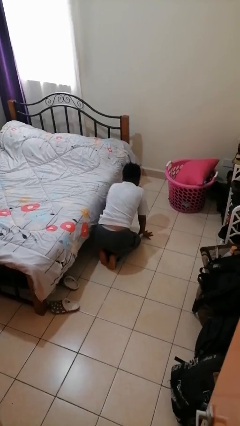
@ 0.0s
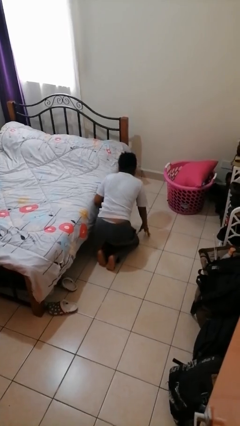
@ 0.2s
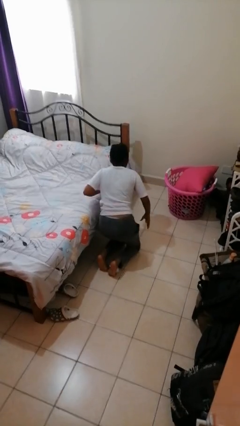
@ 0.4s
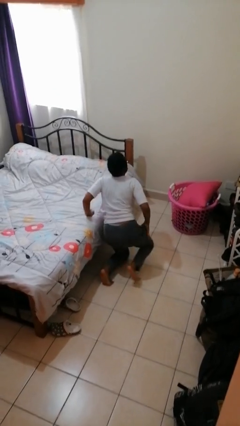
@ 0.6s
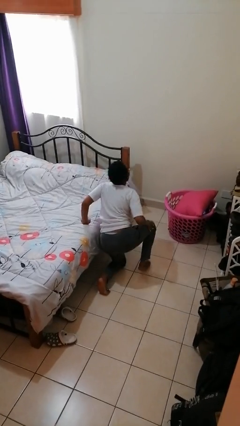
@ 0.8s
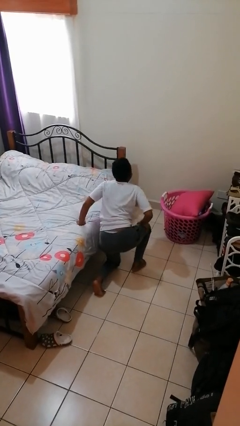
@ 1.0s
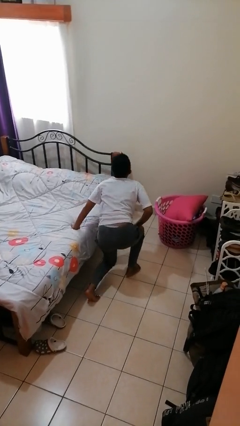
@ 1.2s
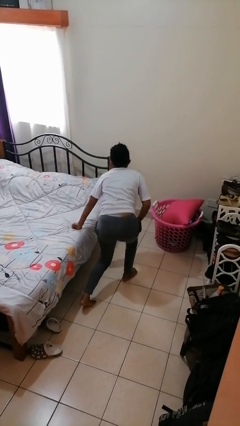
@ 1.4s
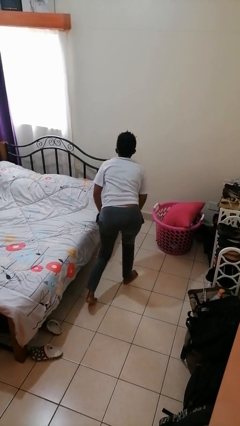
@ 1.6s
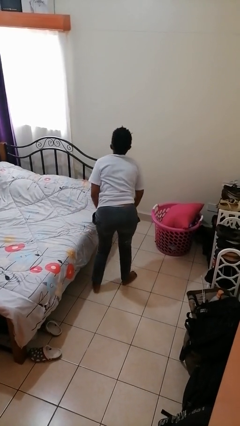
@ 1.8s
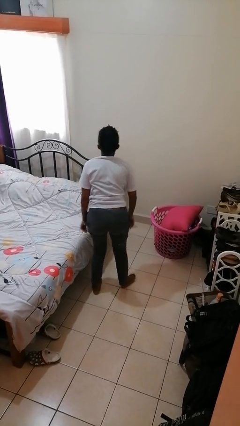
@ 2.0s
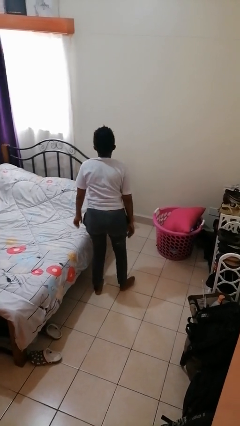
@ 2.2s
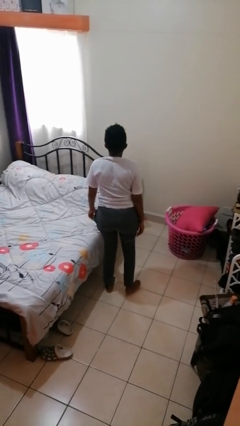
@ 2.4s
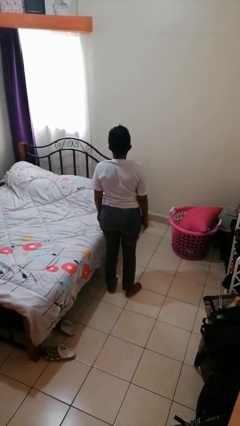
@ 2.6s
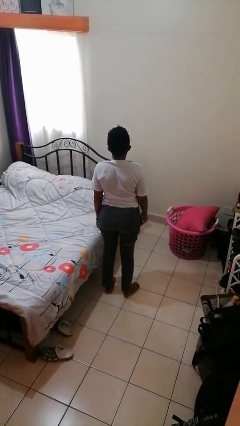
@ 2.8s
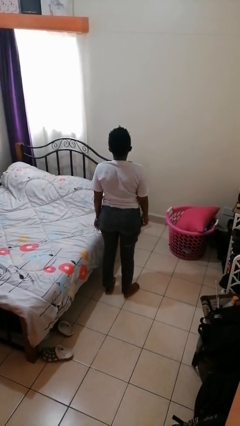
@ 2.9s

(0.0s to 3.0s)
person stands up from floor

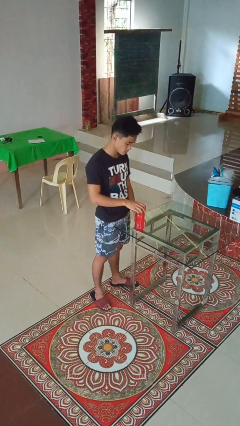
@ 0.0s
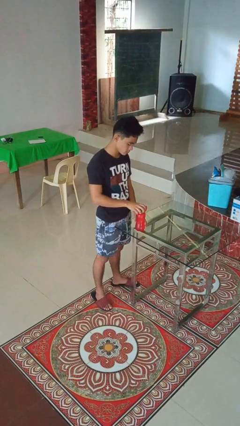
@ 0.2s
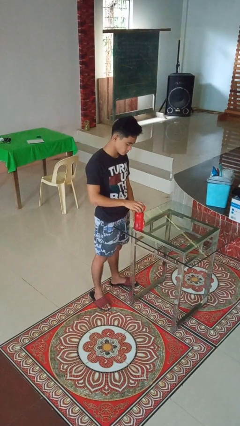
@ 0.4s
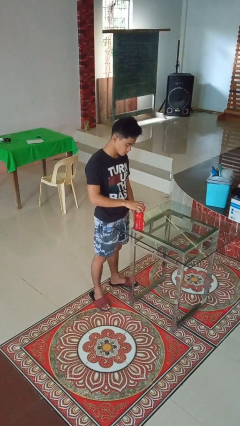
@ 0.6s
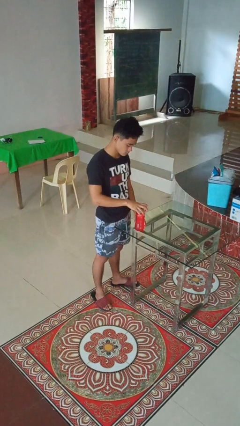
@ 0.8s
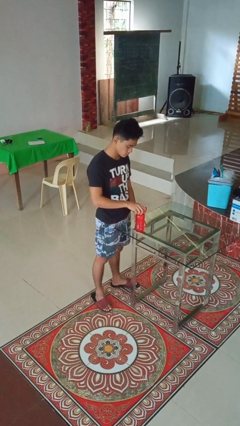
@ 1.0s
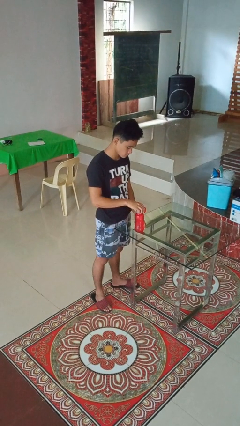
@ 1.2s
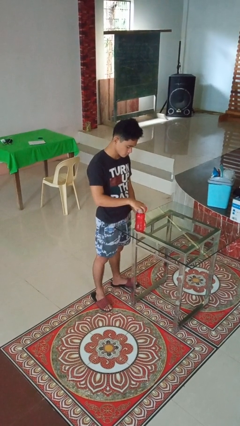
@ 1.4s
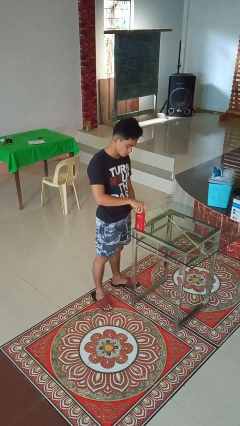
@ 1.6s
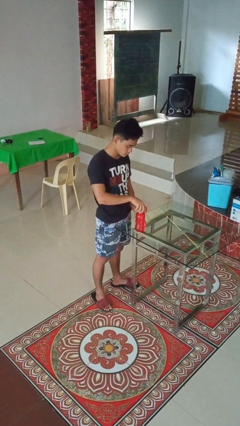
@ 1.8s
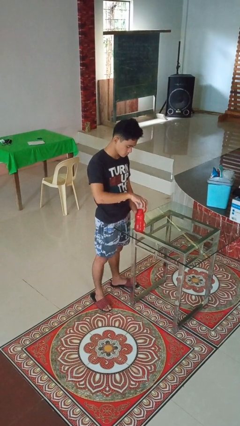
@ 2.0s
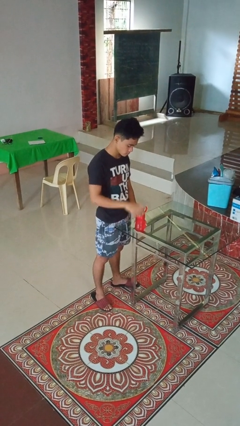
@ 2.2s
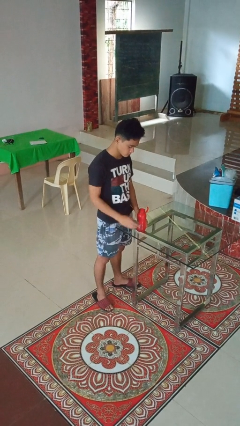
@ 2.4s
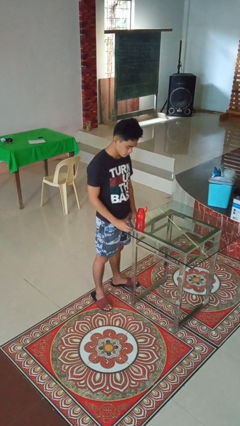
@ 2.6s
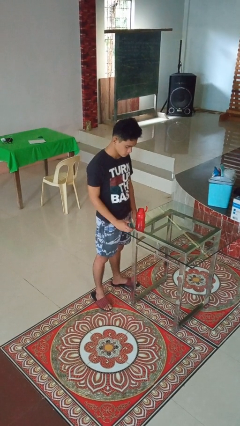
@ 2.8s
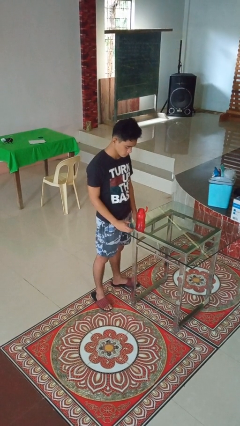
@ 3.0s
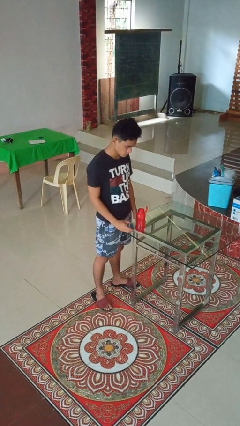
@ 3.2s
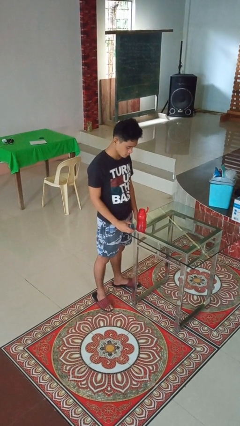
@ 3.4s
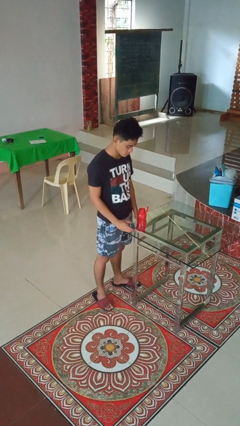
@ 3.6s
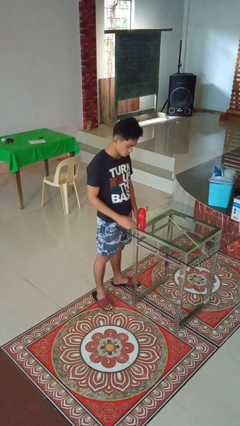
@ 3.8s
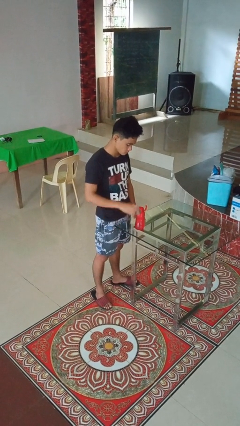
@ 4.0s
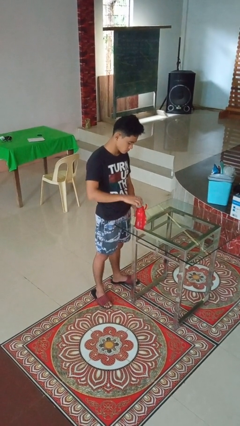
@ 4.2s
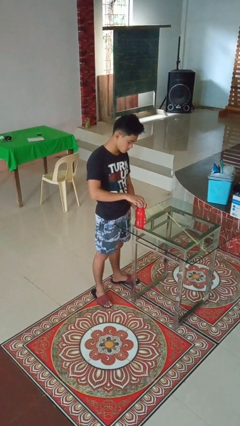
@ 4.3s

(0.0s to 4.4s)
person unscrews lid from bottle

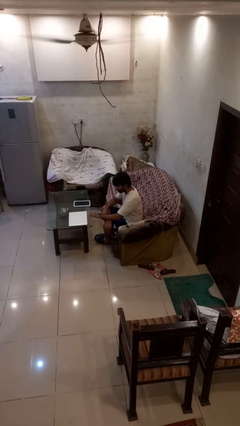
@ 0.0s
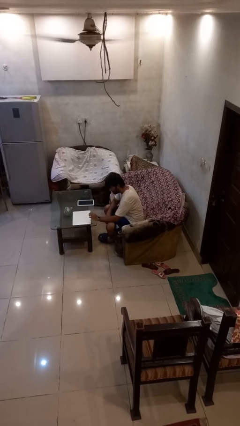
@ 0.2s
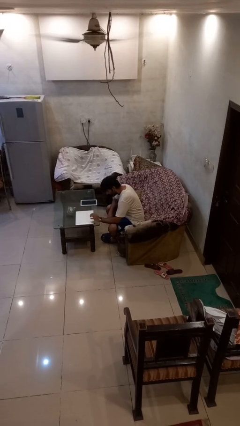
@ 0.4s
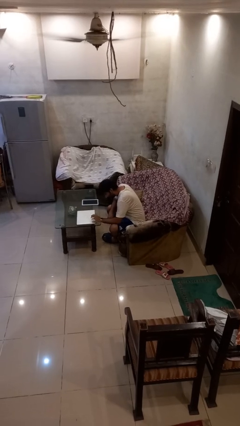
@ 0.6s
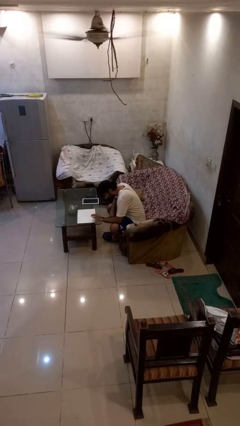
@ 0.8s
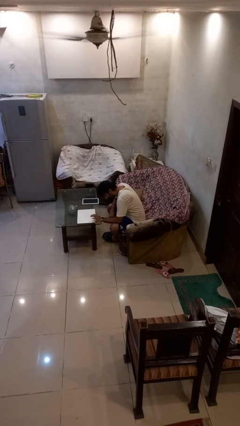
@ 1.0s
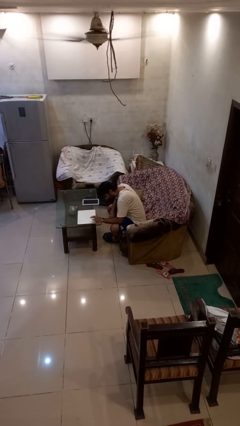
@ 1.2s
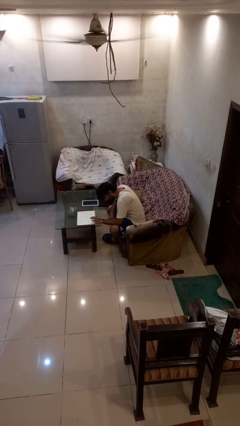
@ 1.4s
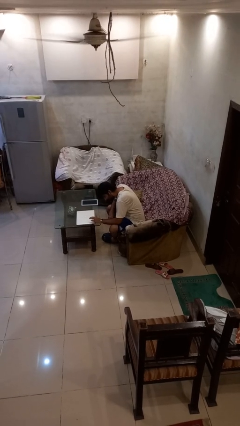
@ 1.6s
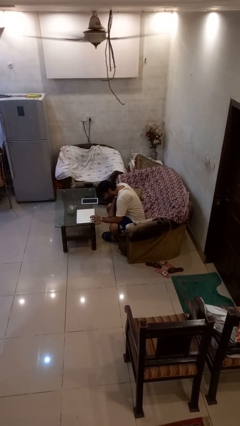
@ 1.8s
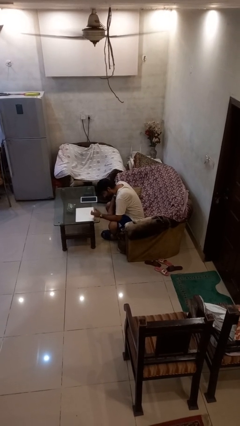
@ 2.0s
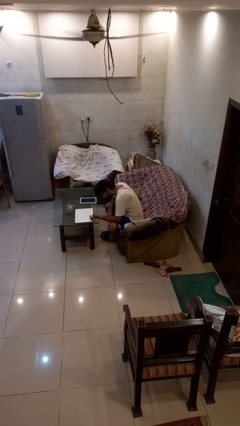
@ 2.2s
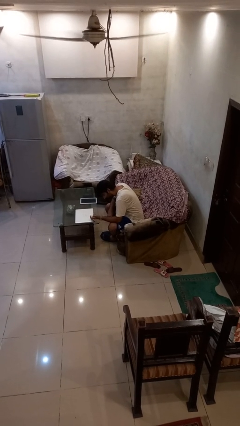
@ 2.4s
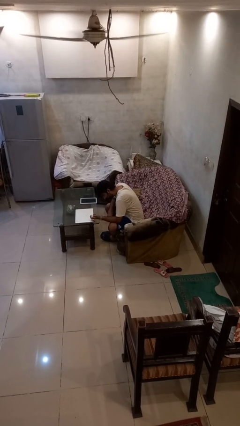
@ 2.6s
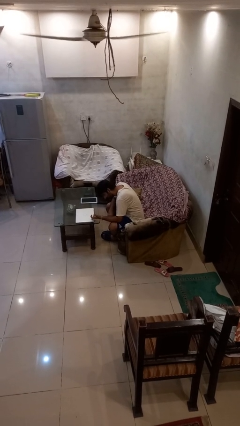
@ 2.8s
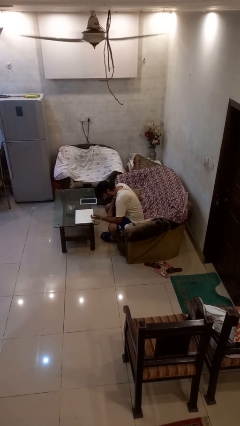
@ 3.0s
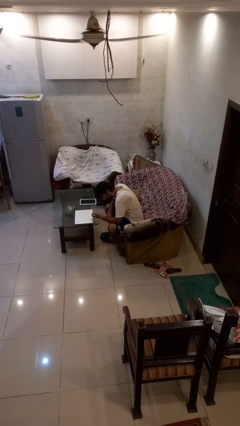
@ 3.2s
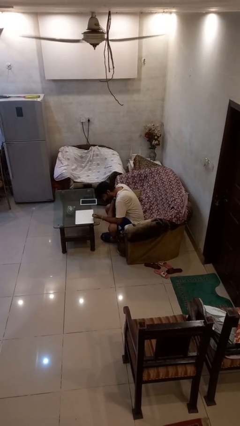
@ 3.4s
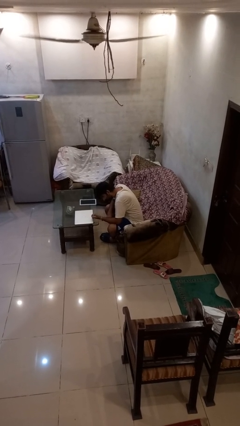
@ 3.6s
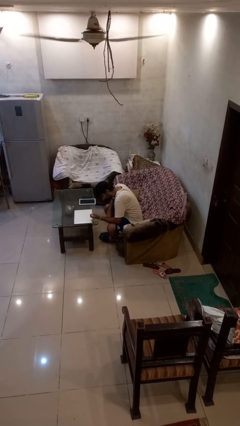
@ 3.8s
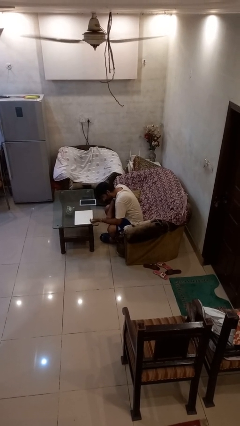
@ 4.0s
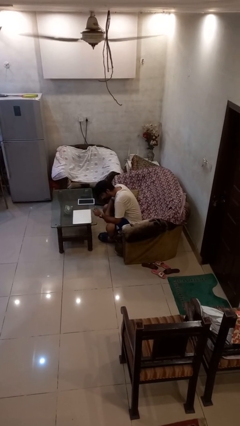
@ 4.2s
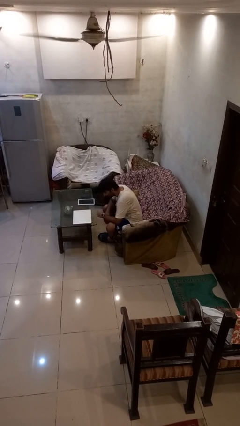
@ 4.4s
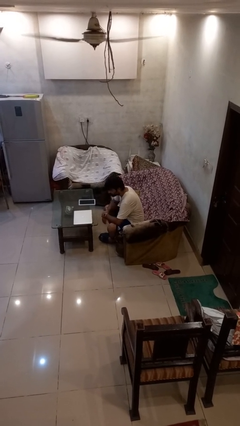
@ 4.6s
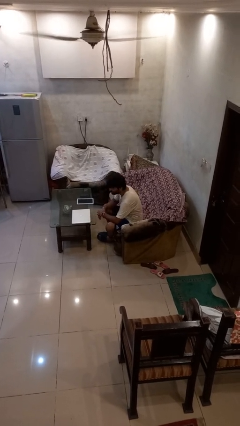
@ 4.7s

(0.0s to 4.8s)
person taps object with finger

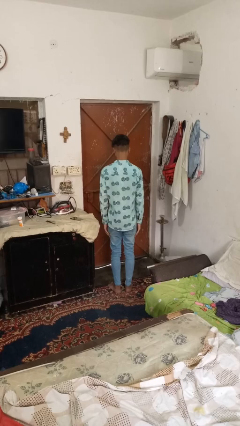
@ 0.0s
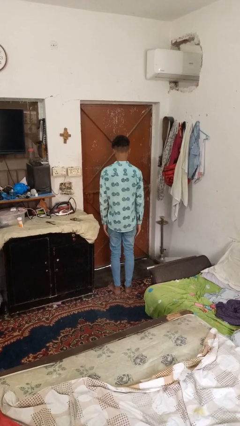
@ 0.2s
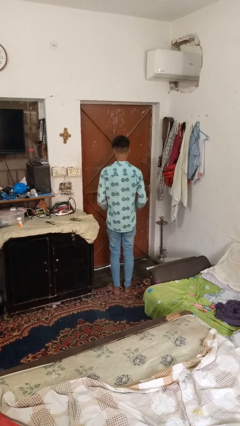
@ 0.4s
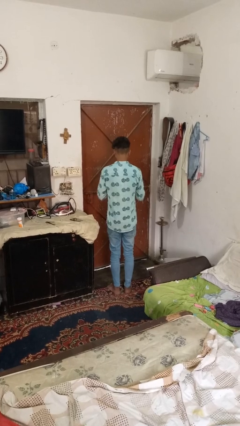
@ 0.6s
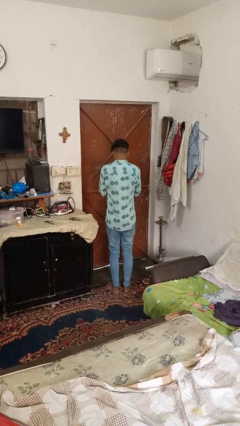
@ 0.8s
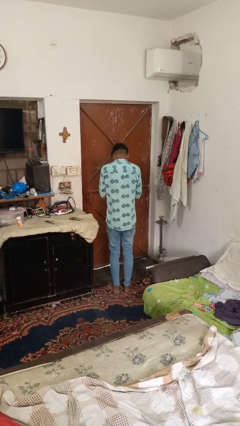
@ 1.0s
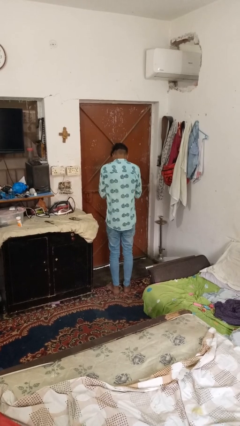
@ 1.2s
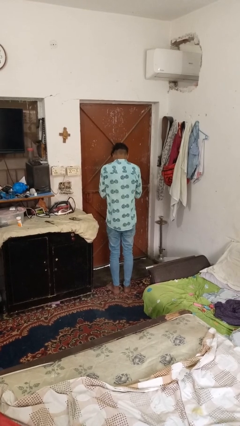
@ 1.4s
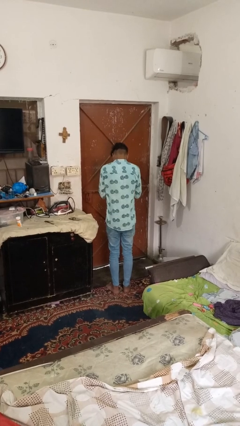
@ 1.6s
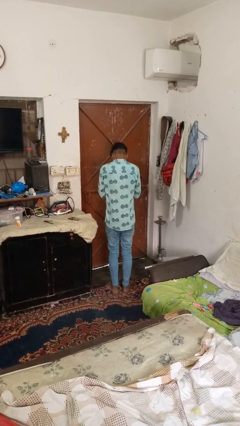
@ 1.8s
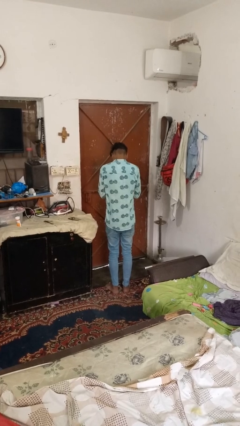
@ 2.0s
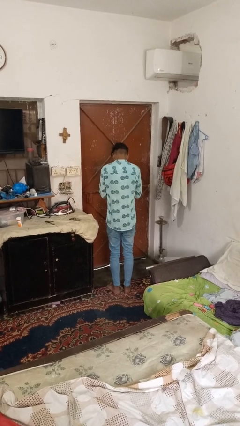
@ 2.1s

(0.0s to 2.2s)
person sneezes into hand

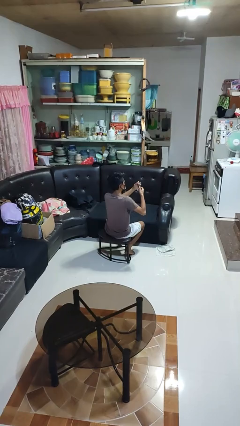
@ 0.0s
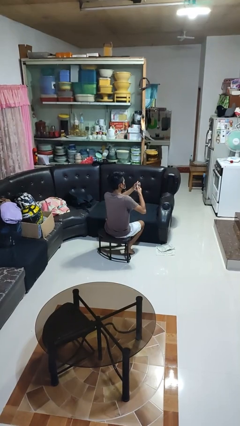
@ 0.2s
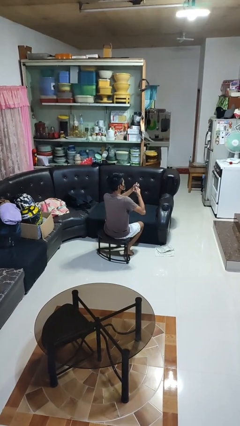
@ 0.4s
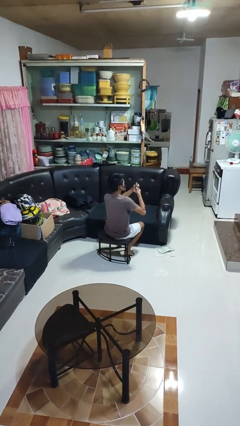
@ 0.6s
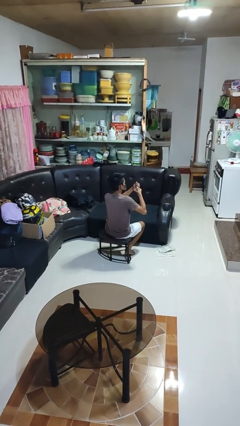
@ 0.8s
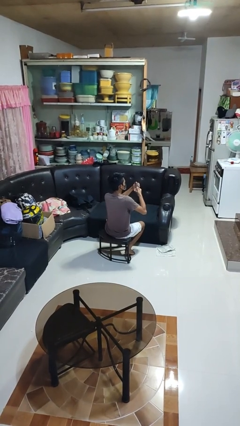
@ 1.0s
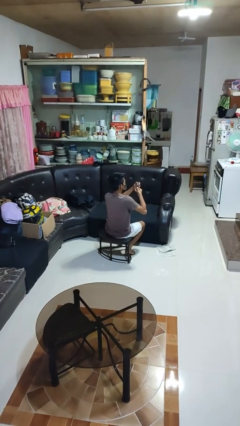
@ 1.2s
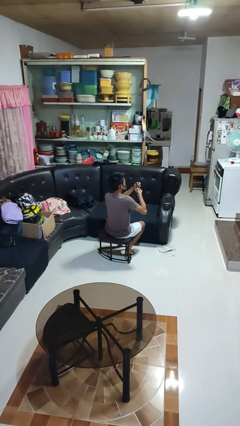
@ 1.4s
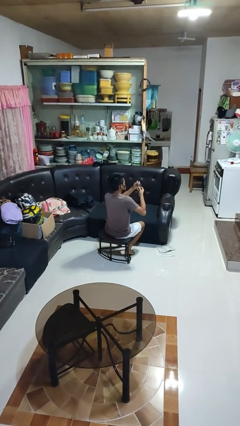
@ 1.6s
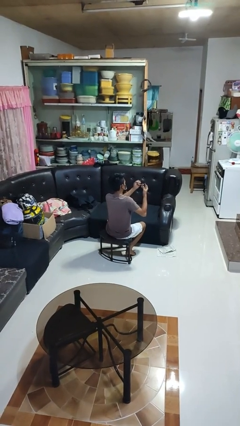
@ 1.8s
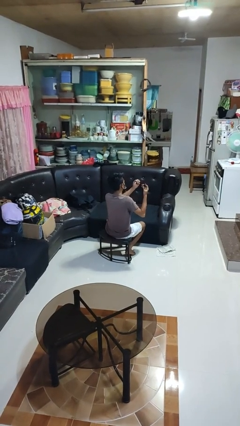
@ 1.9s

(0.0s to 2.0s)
person clips fingernails

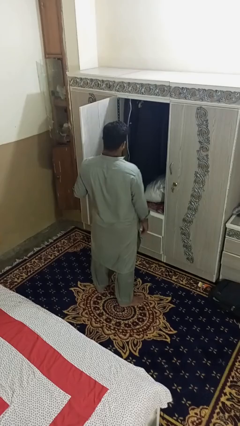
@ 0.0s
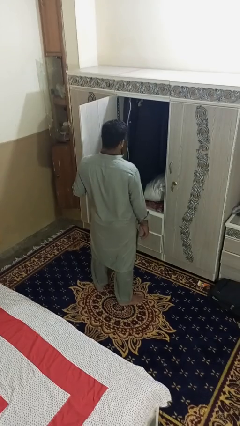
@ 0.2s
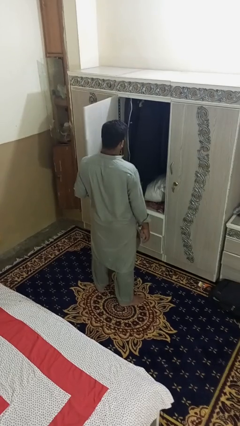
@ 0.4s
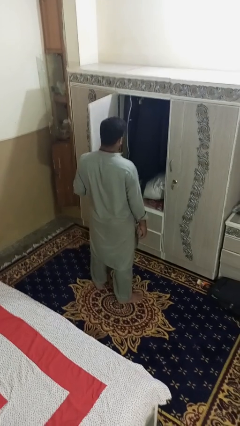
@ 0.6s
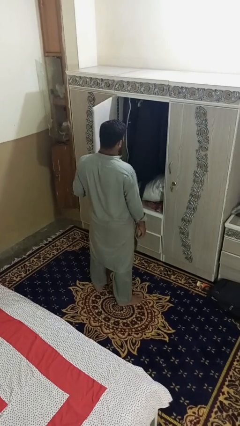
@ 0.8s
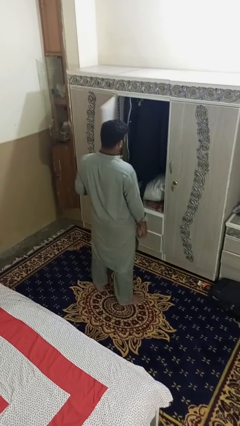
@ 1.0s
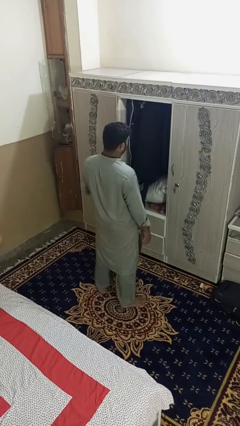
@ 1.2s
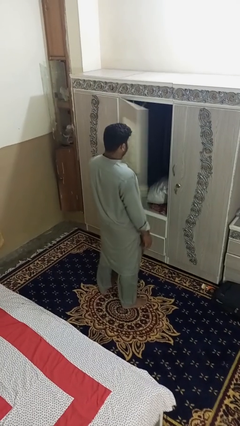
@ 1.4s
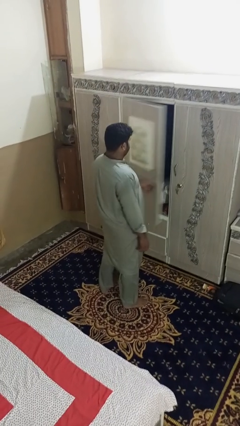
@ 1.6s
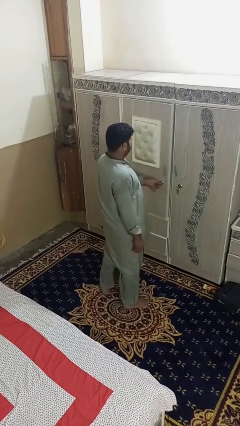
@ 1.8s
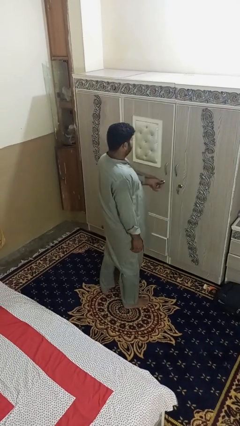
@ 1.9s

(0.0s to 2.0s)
person closes dresser drawer
